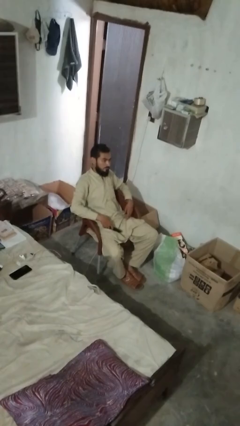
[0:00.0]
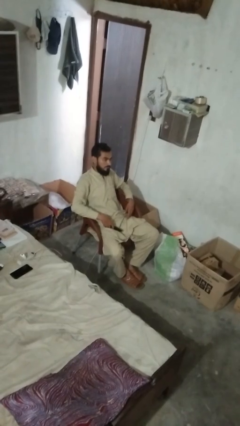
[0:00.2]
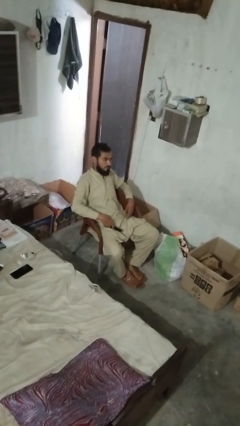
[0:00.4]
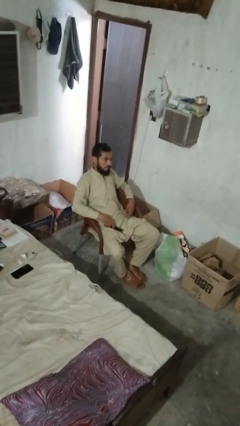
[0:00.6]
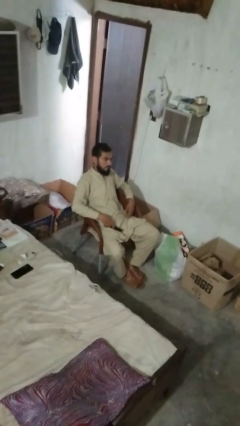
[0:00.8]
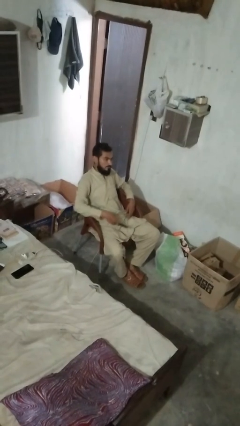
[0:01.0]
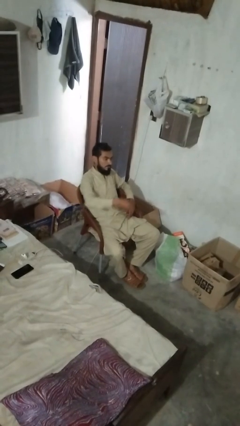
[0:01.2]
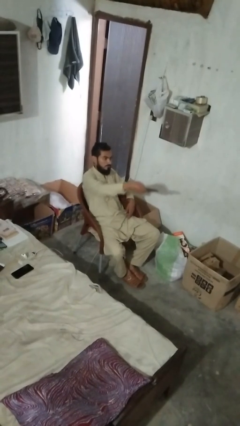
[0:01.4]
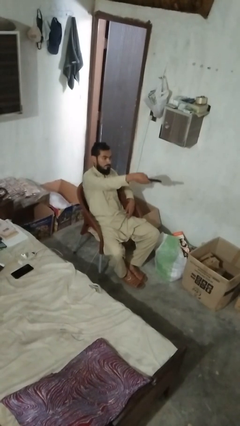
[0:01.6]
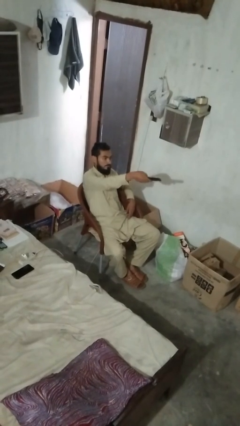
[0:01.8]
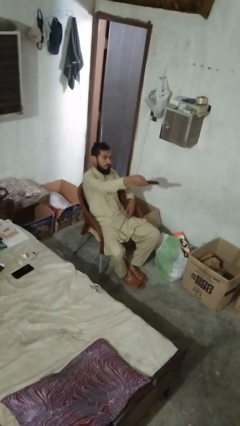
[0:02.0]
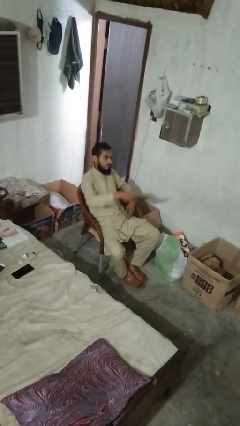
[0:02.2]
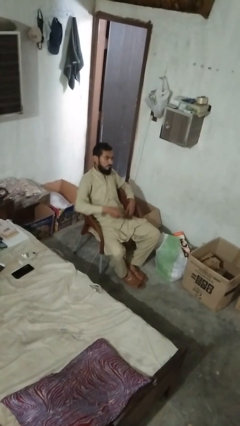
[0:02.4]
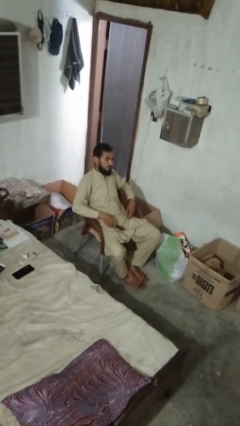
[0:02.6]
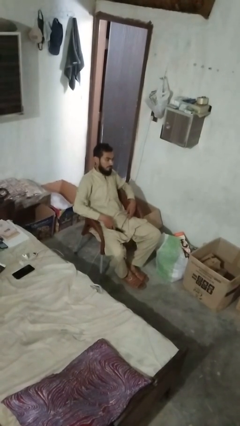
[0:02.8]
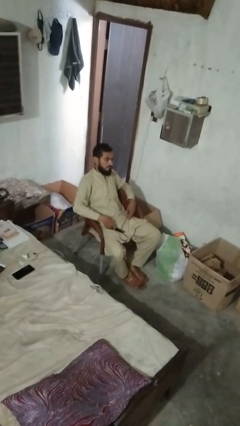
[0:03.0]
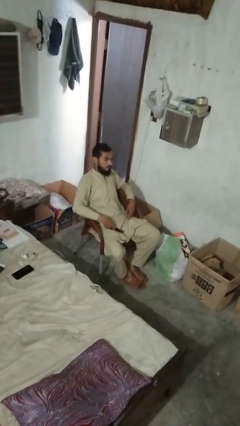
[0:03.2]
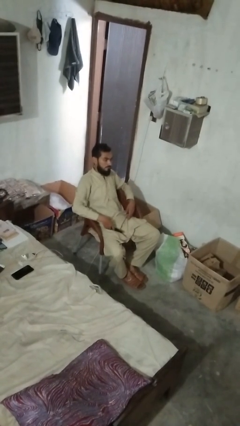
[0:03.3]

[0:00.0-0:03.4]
person uses television remote

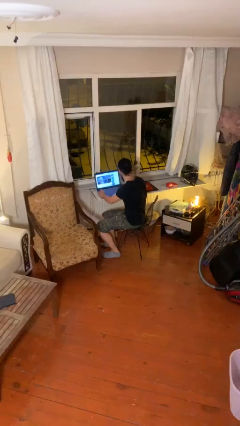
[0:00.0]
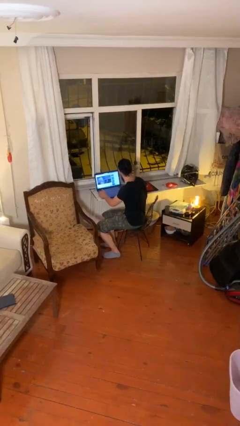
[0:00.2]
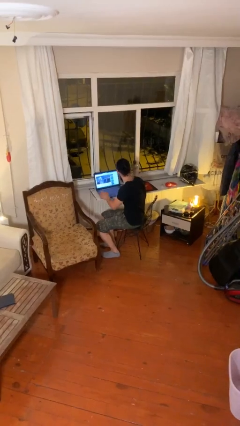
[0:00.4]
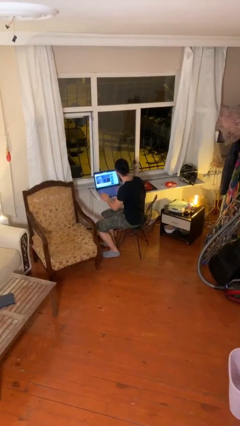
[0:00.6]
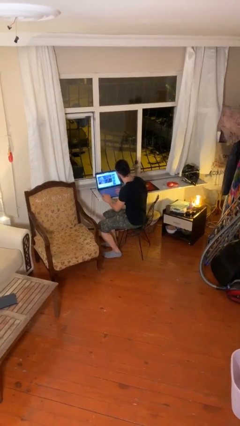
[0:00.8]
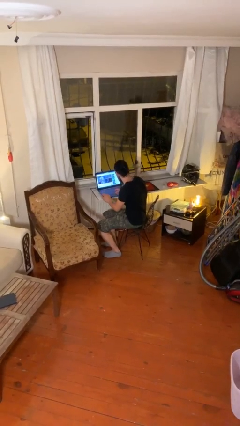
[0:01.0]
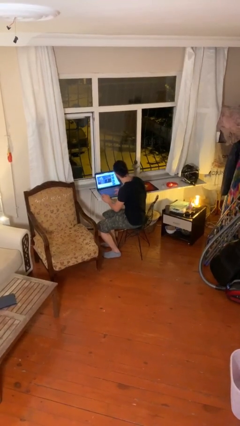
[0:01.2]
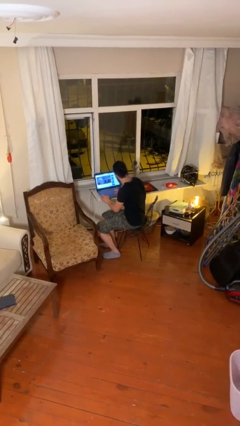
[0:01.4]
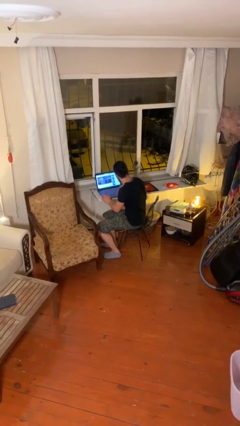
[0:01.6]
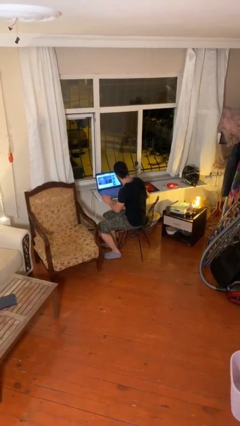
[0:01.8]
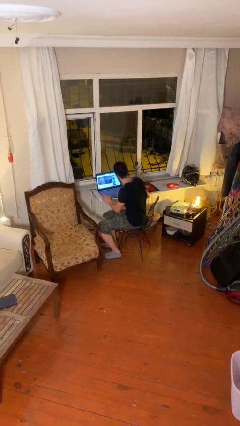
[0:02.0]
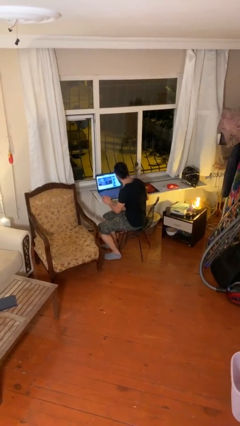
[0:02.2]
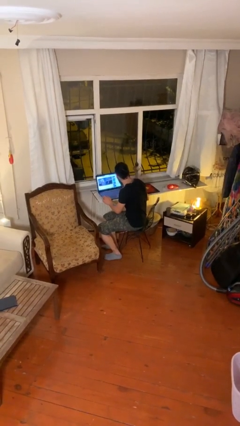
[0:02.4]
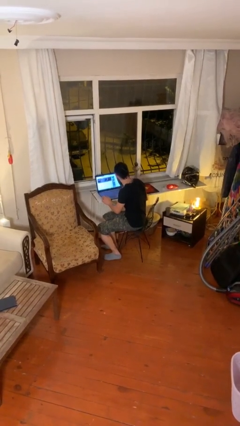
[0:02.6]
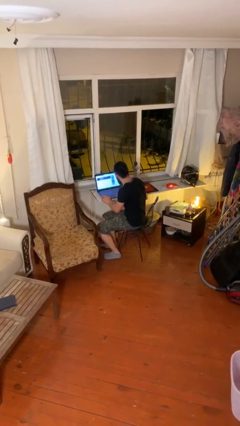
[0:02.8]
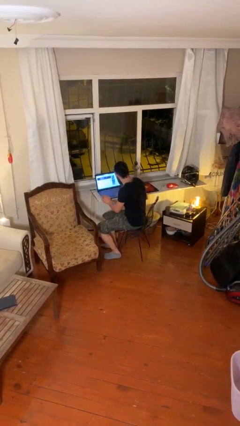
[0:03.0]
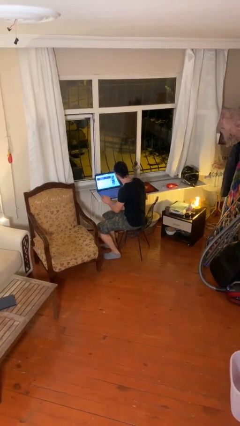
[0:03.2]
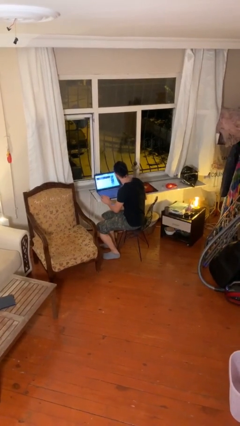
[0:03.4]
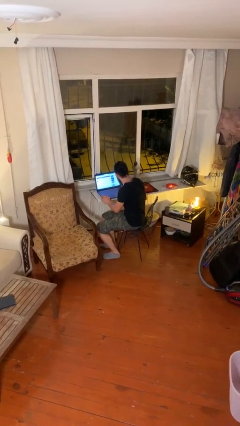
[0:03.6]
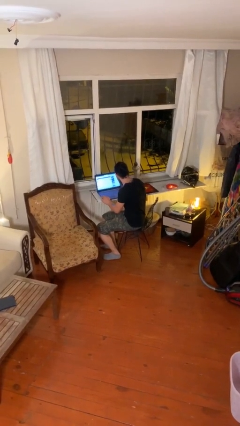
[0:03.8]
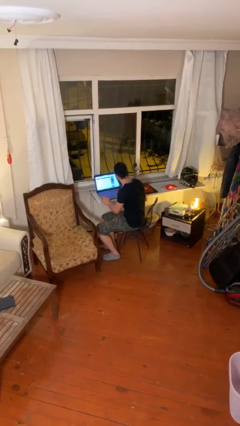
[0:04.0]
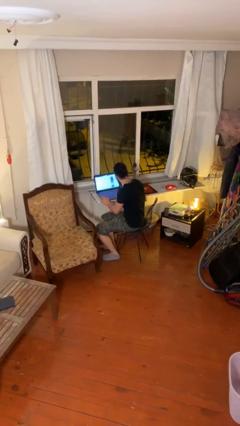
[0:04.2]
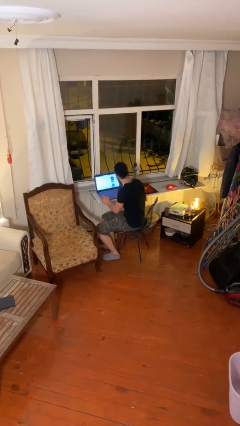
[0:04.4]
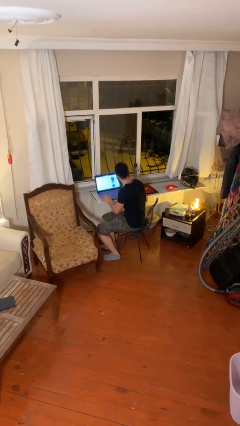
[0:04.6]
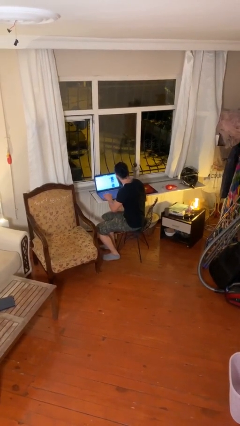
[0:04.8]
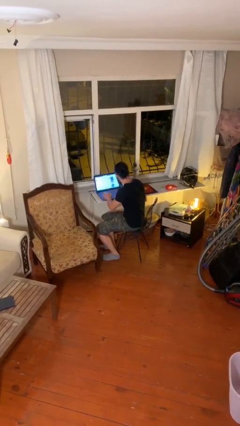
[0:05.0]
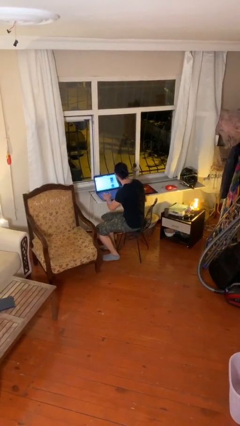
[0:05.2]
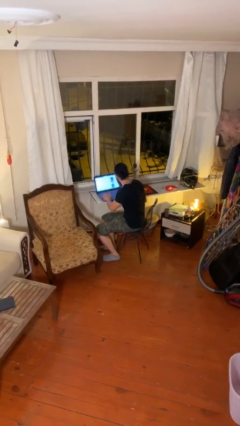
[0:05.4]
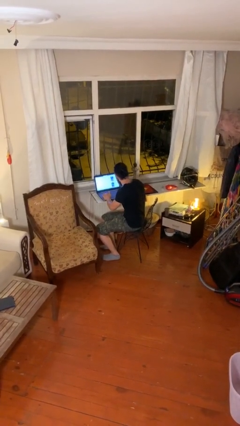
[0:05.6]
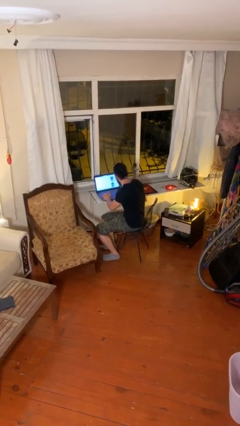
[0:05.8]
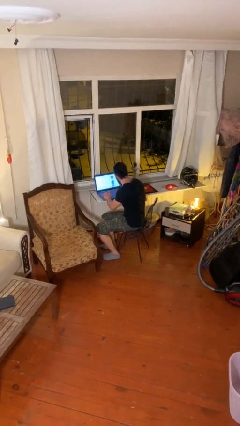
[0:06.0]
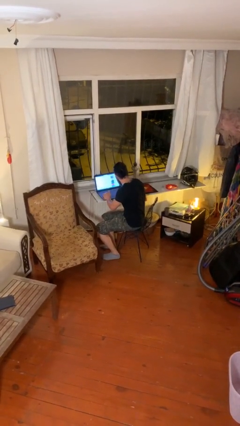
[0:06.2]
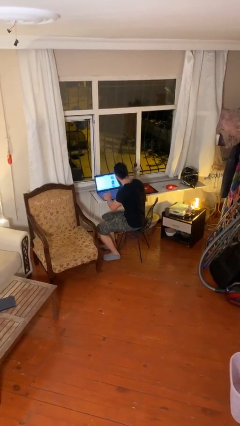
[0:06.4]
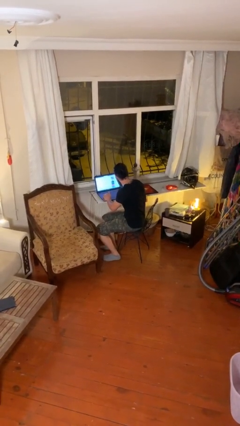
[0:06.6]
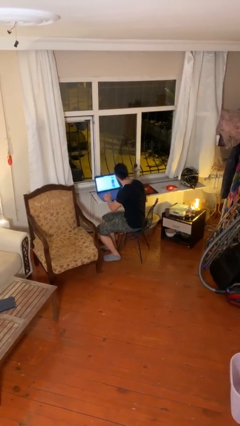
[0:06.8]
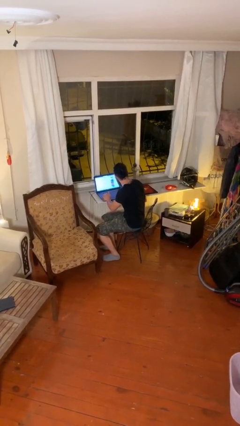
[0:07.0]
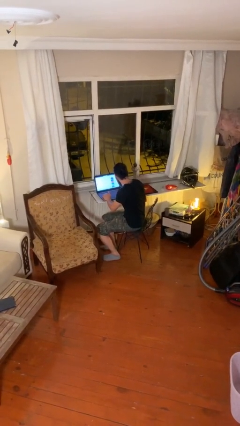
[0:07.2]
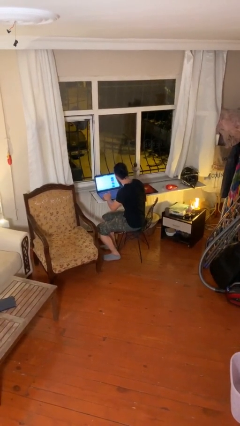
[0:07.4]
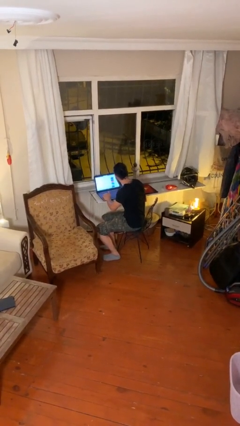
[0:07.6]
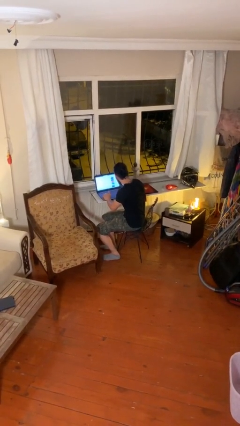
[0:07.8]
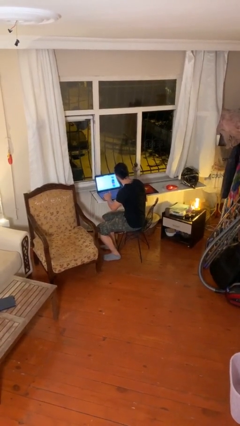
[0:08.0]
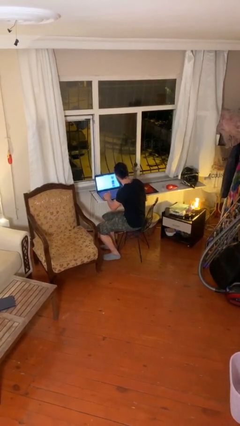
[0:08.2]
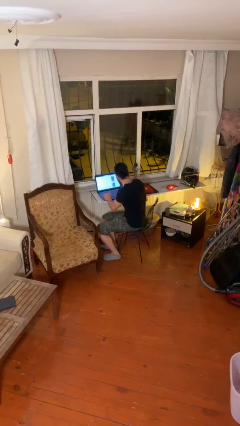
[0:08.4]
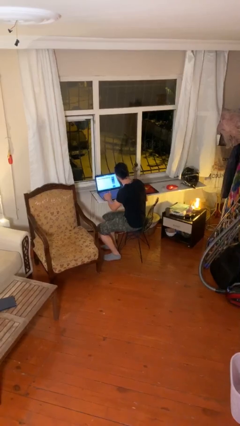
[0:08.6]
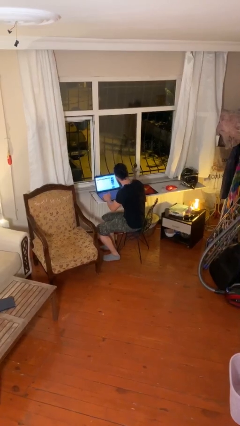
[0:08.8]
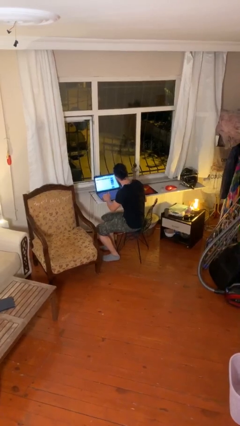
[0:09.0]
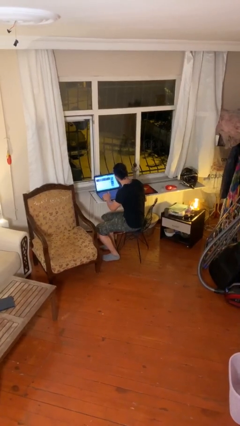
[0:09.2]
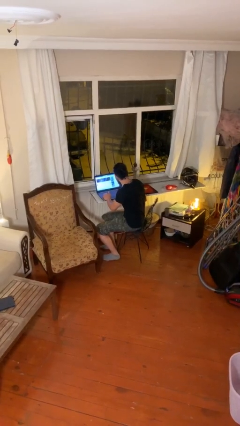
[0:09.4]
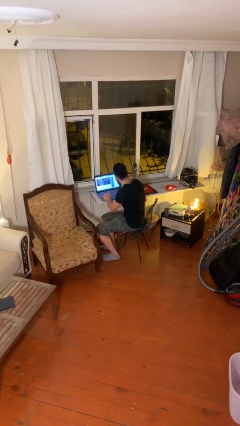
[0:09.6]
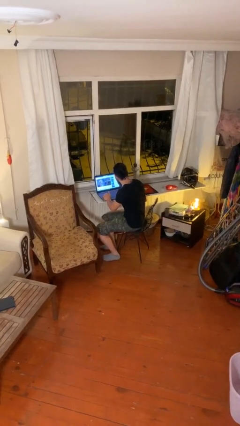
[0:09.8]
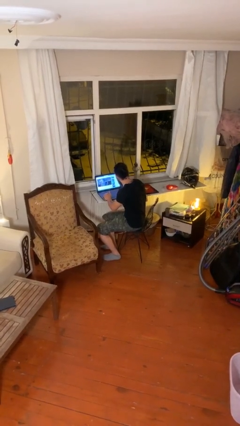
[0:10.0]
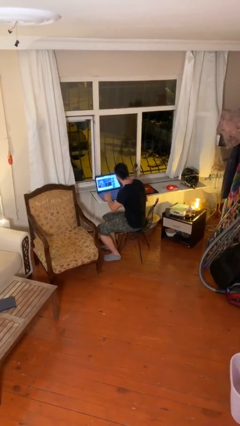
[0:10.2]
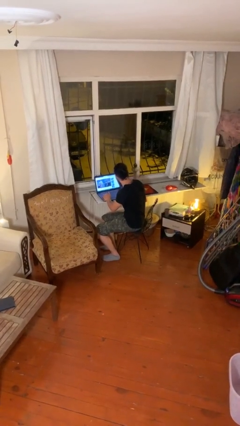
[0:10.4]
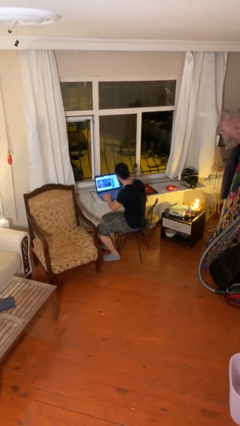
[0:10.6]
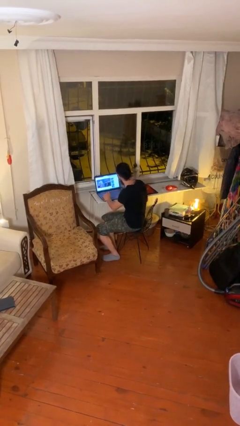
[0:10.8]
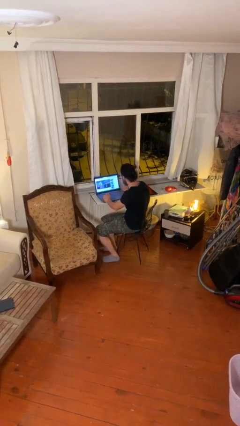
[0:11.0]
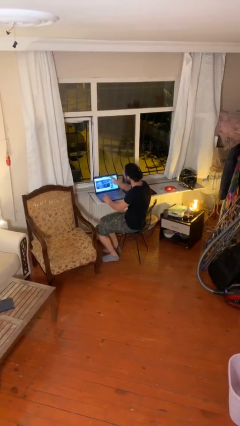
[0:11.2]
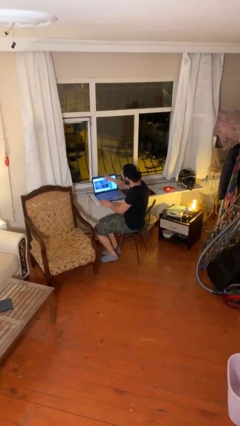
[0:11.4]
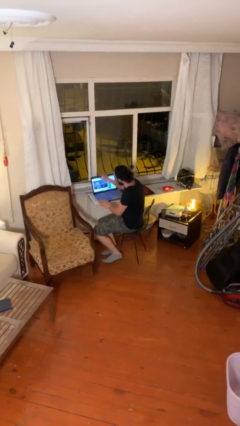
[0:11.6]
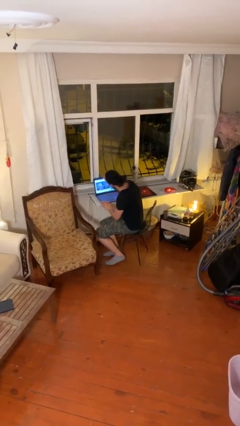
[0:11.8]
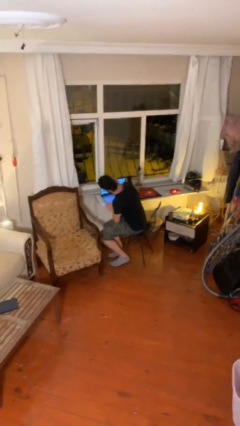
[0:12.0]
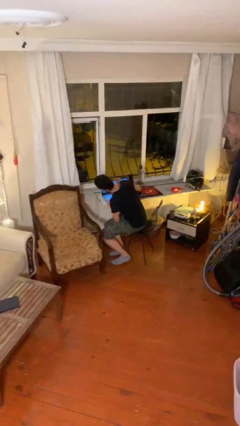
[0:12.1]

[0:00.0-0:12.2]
person interacts with laptop

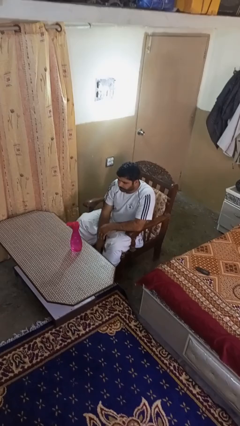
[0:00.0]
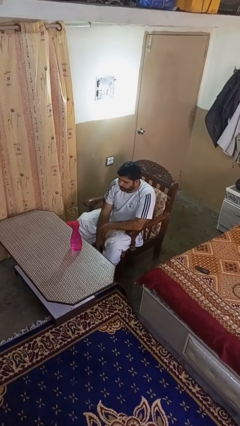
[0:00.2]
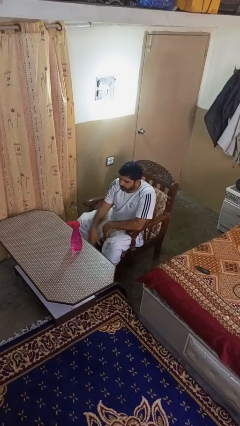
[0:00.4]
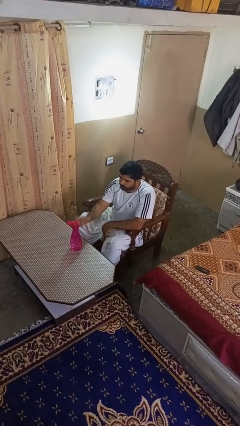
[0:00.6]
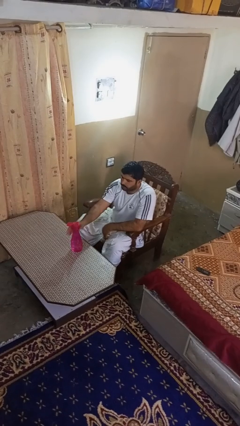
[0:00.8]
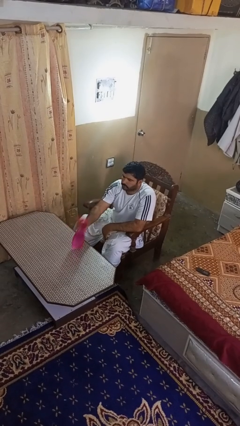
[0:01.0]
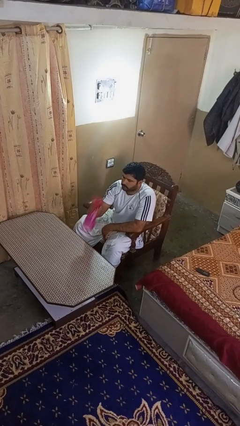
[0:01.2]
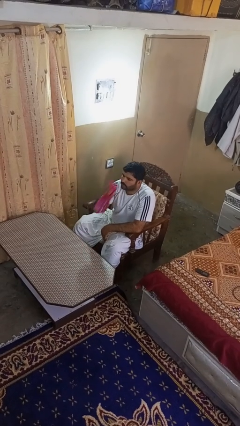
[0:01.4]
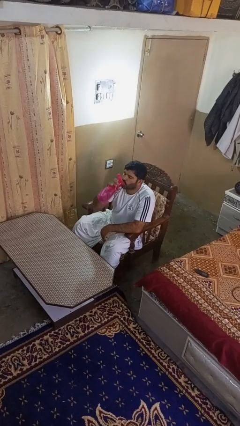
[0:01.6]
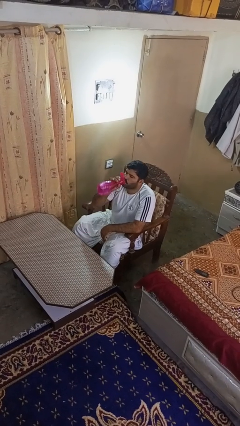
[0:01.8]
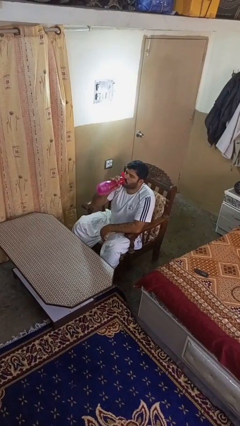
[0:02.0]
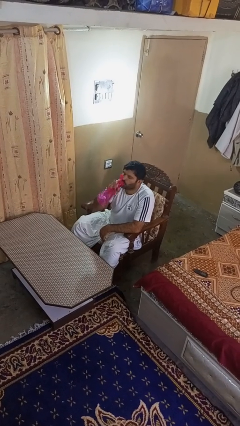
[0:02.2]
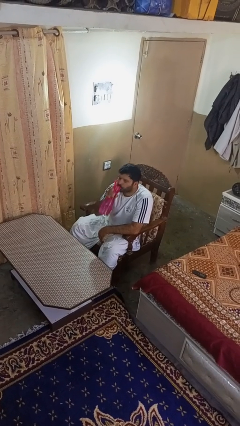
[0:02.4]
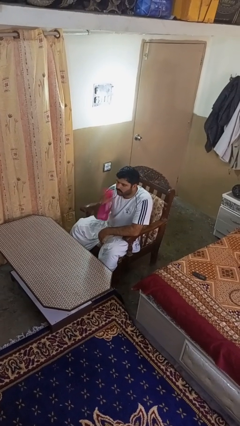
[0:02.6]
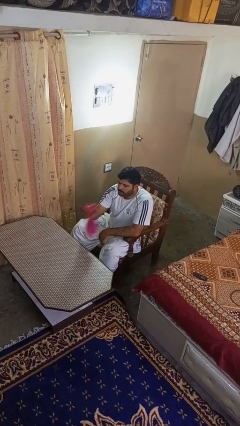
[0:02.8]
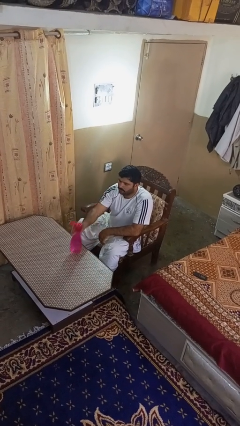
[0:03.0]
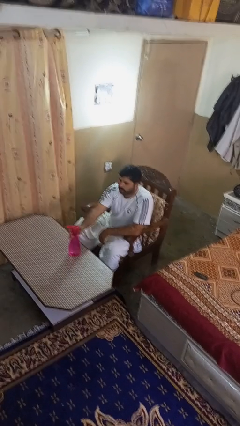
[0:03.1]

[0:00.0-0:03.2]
person drinks from bottle
